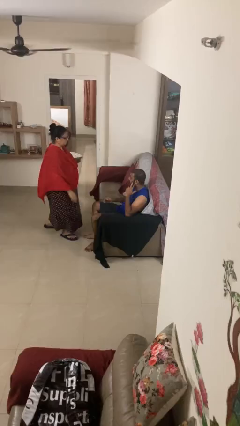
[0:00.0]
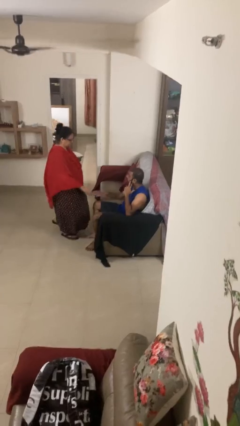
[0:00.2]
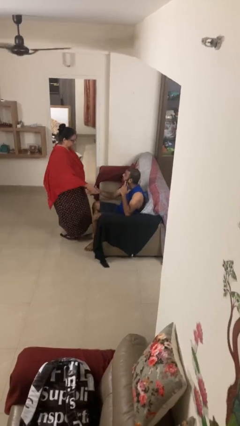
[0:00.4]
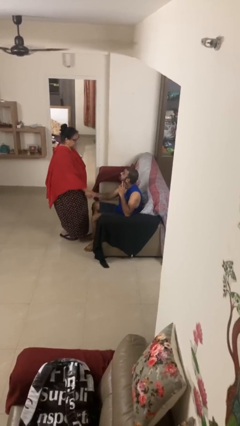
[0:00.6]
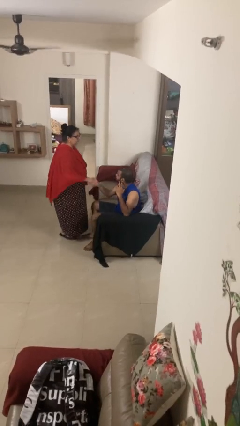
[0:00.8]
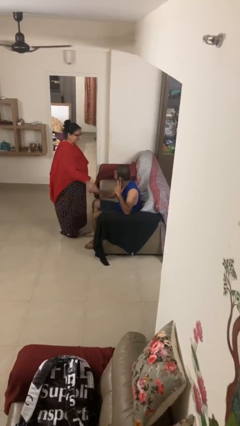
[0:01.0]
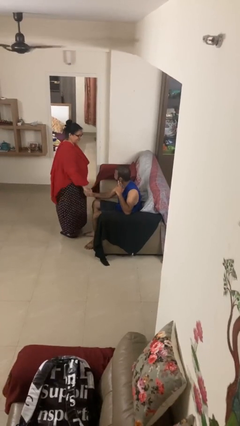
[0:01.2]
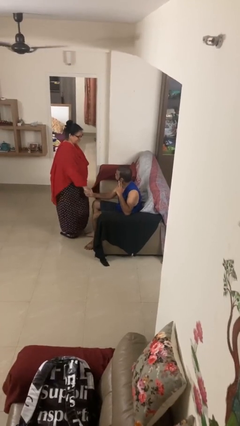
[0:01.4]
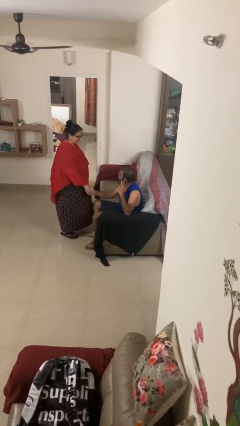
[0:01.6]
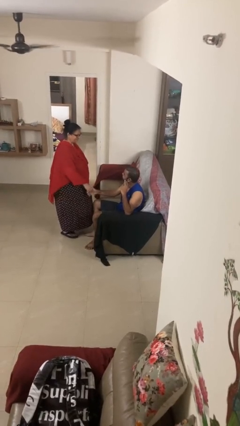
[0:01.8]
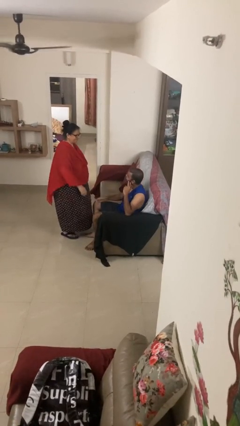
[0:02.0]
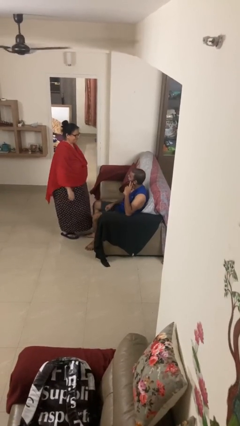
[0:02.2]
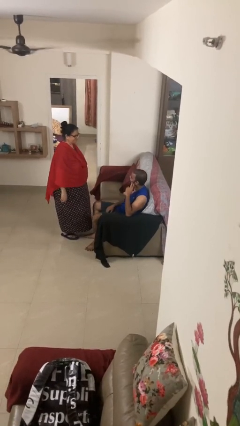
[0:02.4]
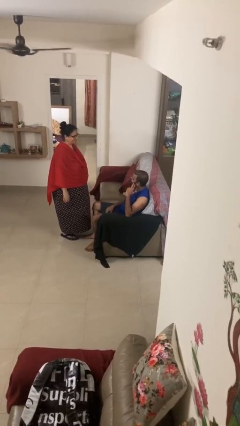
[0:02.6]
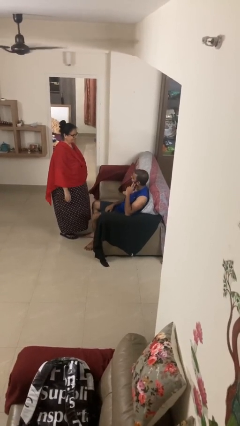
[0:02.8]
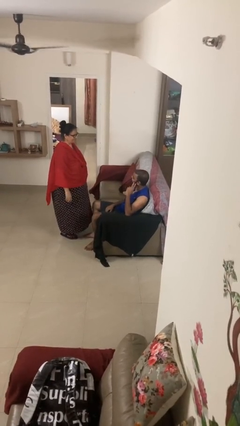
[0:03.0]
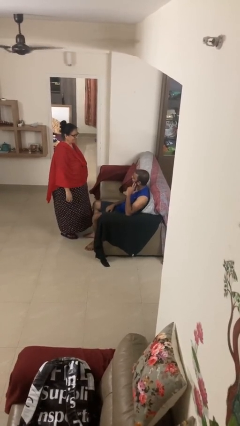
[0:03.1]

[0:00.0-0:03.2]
person shakes hand

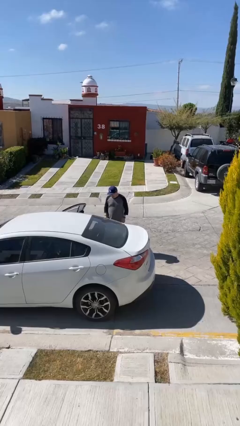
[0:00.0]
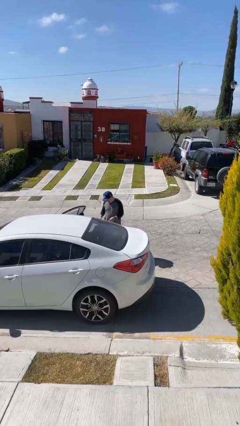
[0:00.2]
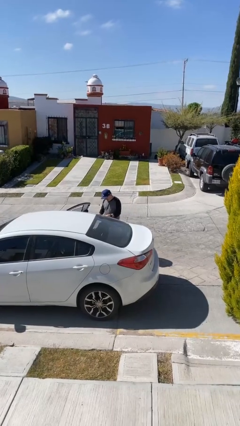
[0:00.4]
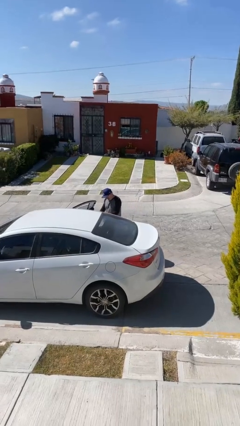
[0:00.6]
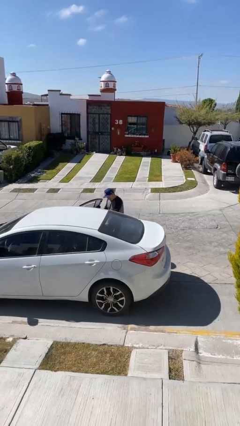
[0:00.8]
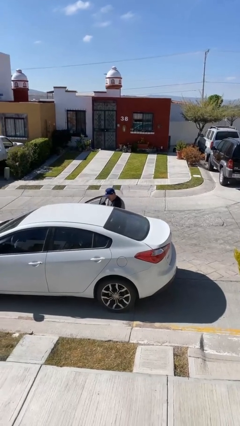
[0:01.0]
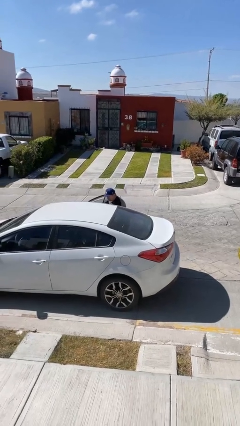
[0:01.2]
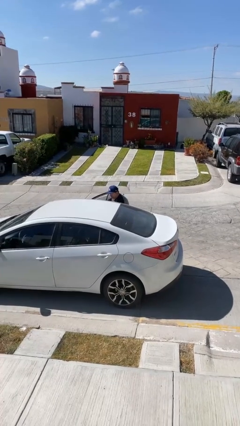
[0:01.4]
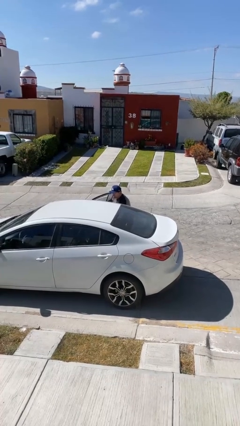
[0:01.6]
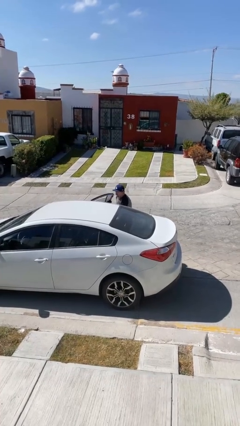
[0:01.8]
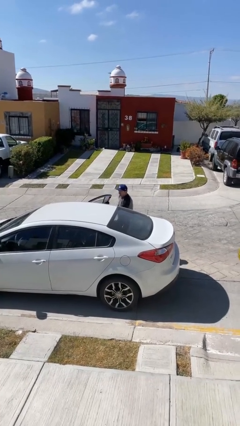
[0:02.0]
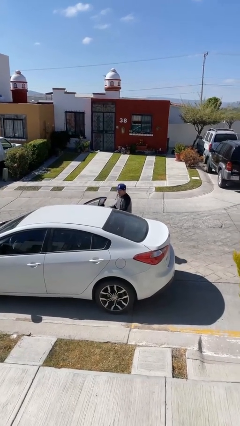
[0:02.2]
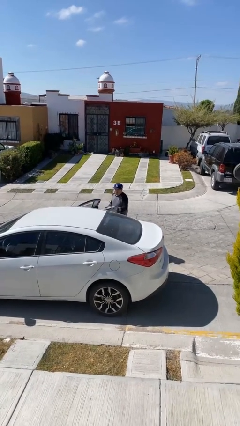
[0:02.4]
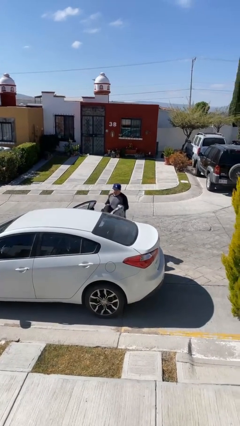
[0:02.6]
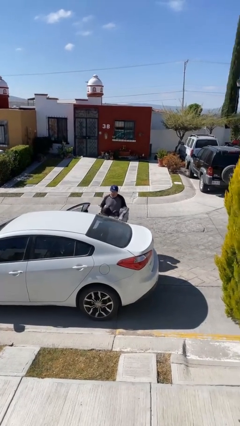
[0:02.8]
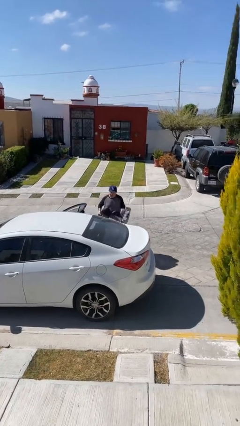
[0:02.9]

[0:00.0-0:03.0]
person unloads car

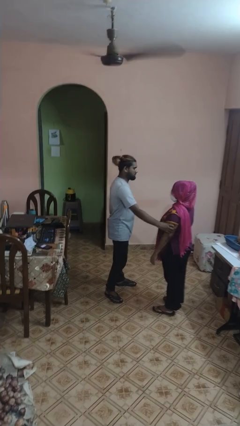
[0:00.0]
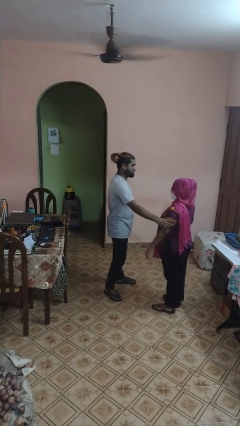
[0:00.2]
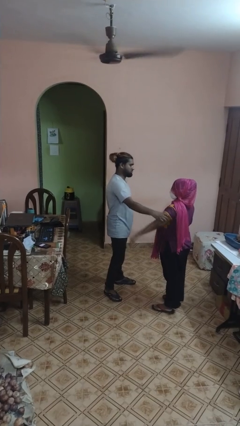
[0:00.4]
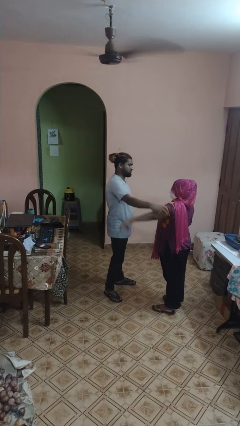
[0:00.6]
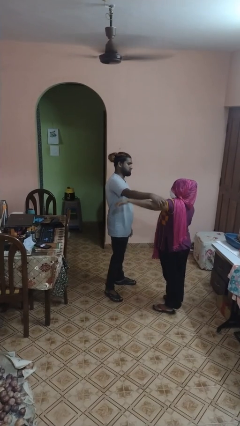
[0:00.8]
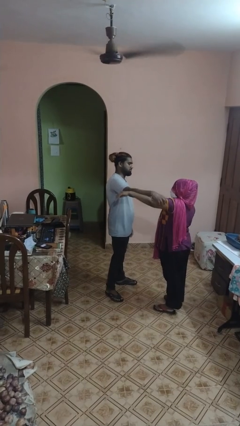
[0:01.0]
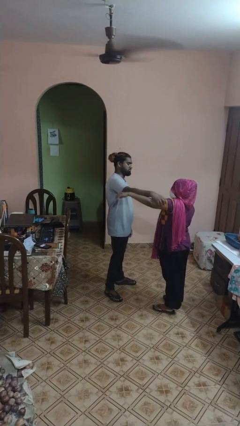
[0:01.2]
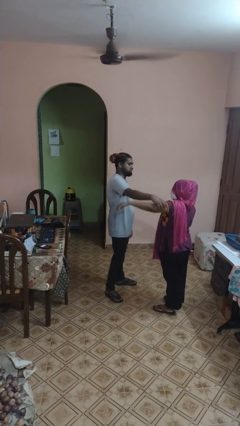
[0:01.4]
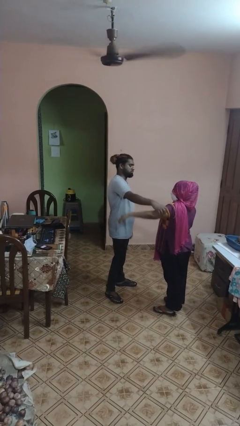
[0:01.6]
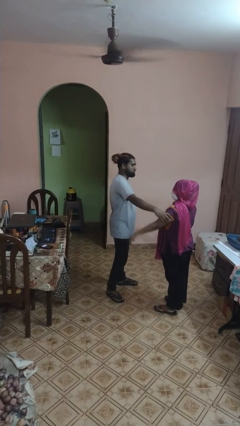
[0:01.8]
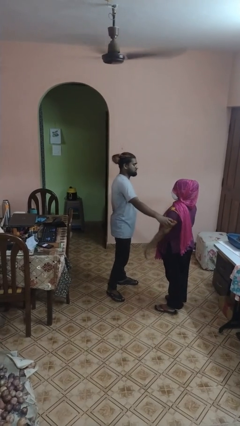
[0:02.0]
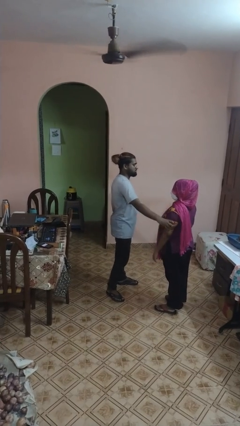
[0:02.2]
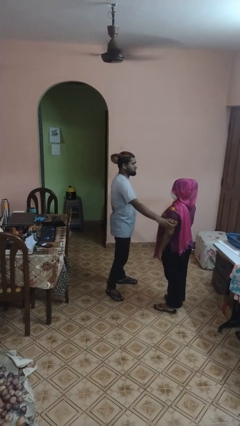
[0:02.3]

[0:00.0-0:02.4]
person grabs person by bicep

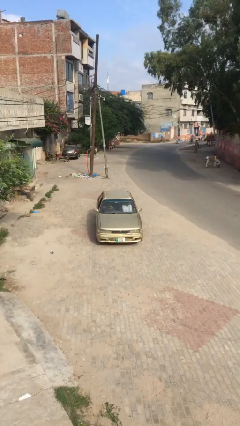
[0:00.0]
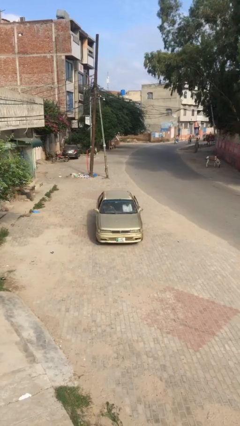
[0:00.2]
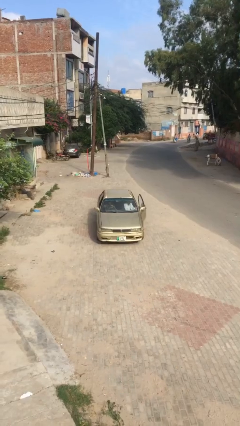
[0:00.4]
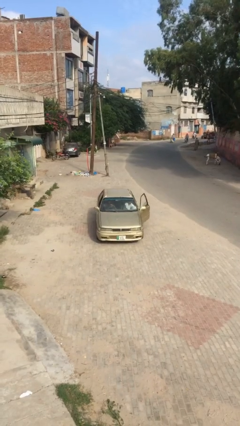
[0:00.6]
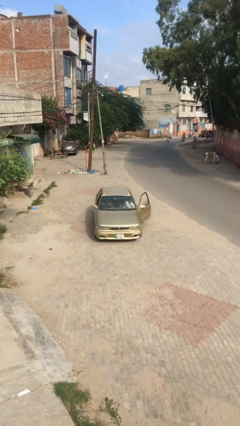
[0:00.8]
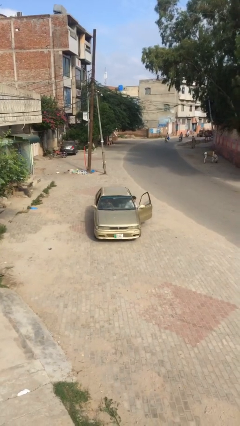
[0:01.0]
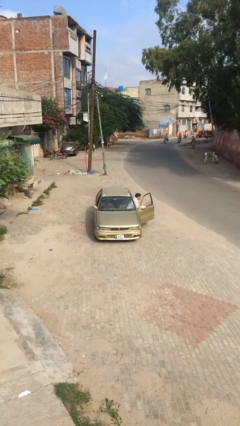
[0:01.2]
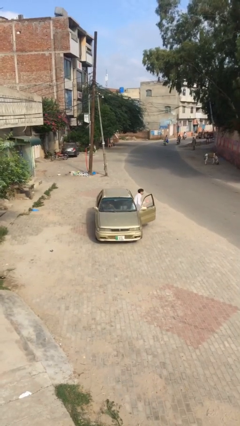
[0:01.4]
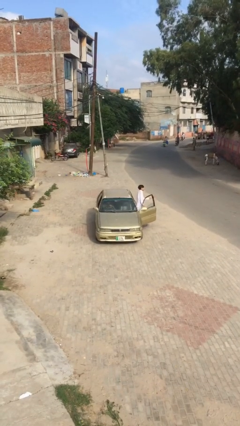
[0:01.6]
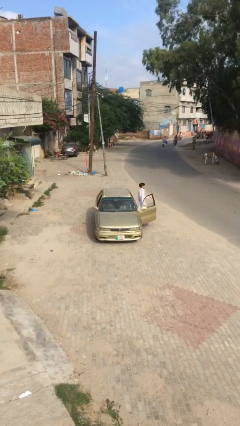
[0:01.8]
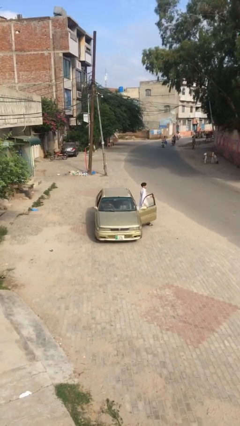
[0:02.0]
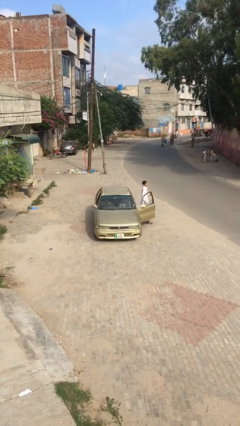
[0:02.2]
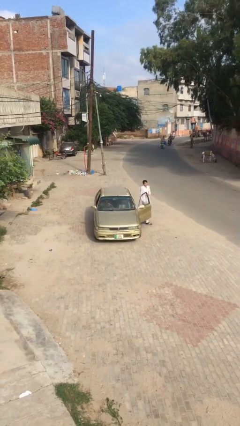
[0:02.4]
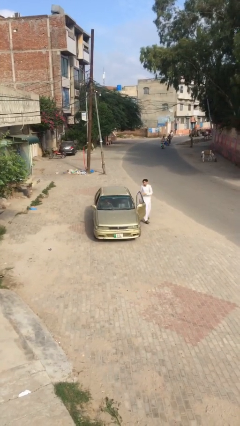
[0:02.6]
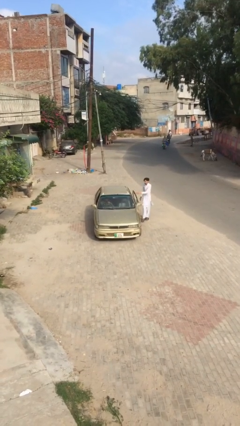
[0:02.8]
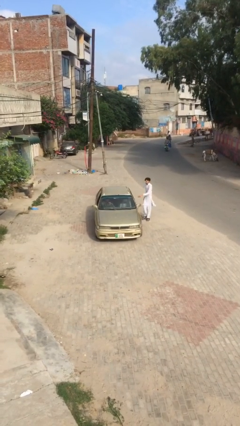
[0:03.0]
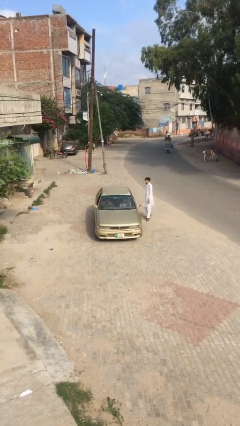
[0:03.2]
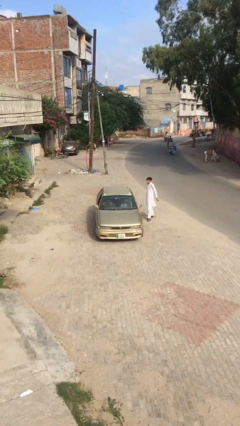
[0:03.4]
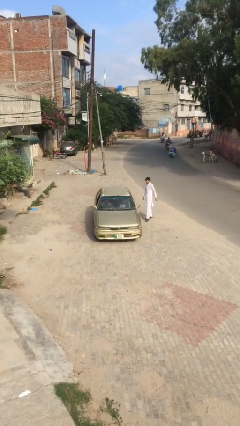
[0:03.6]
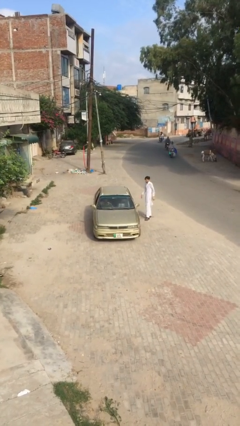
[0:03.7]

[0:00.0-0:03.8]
car drops off person

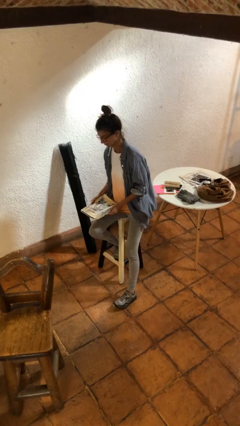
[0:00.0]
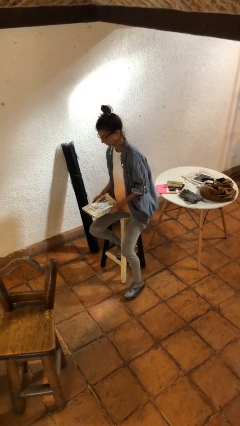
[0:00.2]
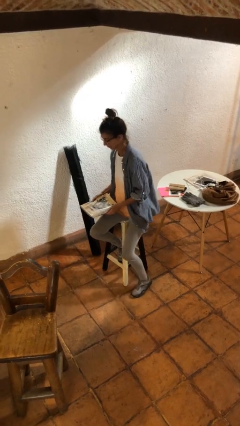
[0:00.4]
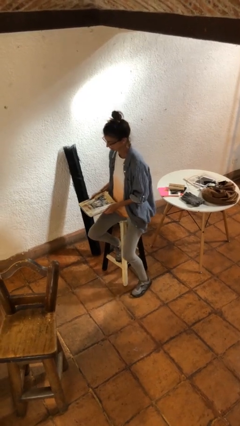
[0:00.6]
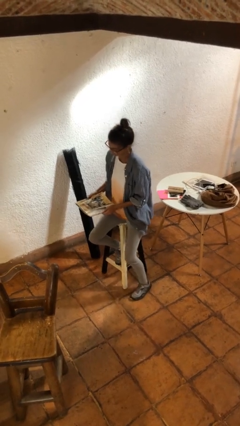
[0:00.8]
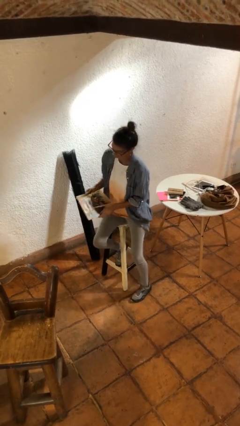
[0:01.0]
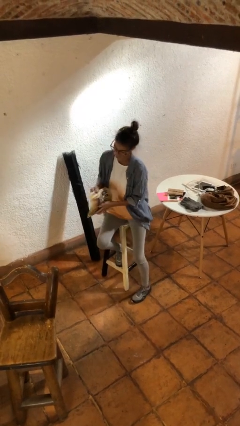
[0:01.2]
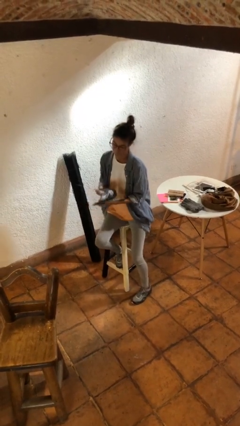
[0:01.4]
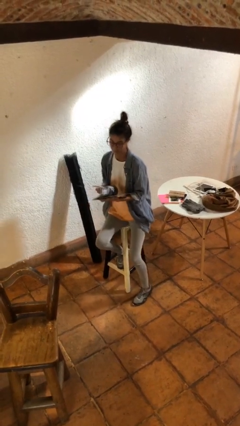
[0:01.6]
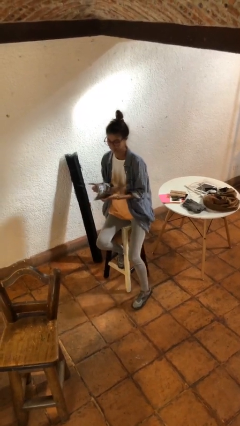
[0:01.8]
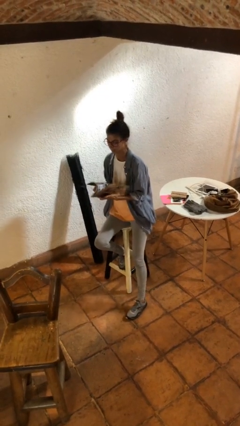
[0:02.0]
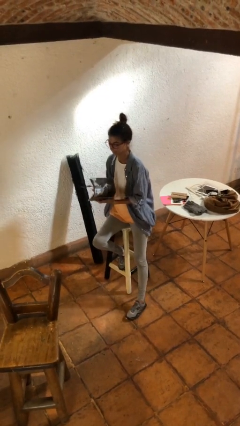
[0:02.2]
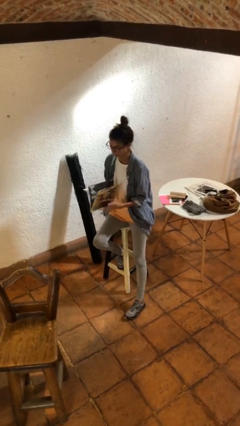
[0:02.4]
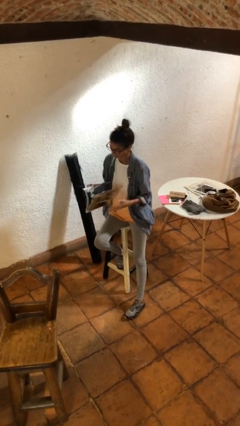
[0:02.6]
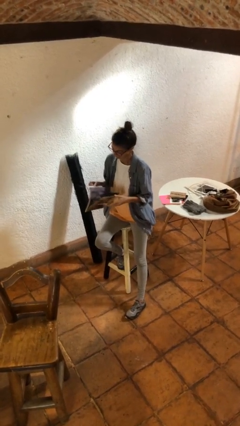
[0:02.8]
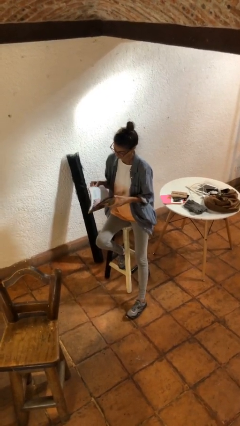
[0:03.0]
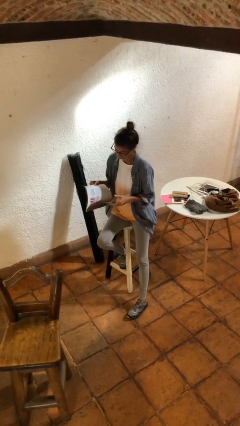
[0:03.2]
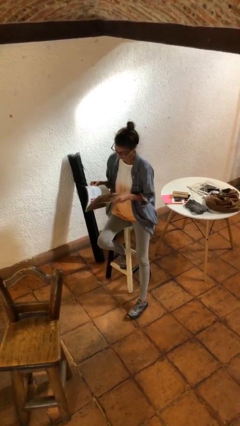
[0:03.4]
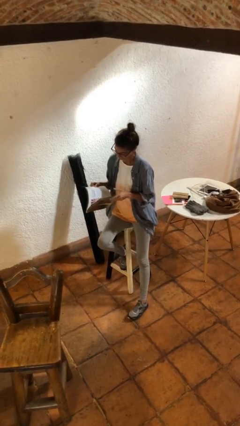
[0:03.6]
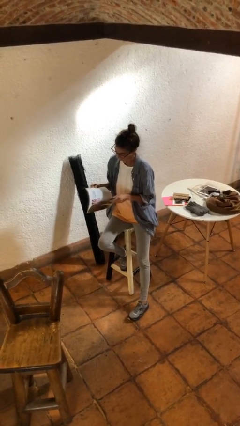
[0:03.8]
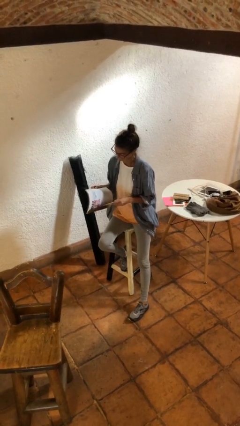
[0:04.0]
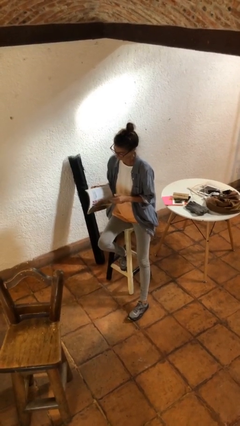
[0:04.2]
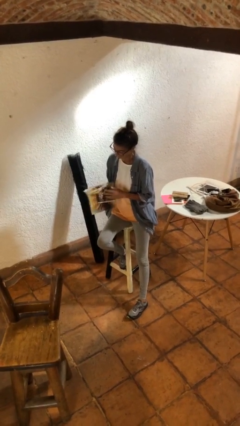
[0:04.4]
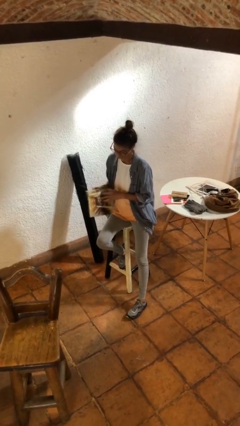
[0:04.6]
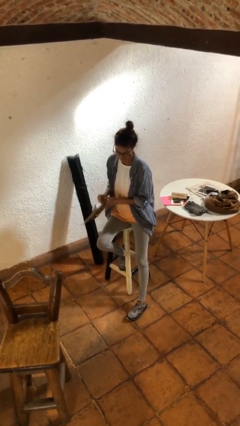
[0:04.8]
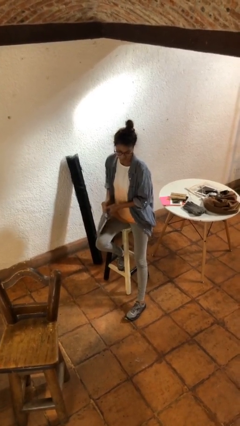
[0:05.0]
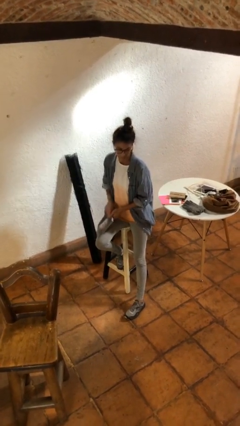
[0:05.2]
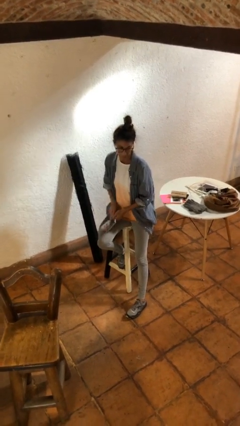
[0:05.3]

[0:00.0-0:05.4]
person reads magazine
